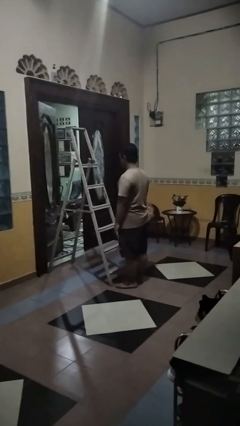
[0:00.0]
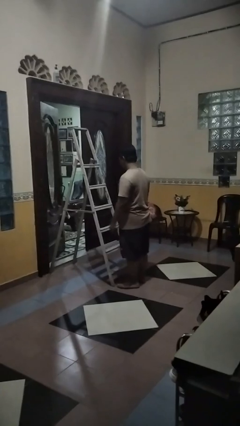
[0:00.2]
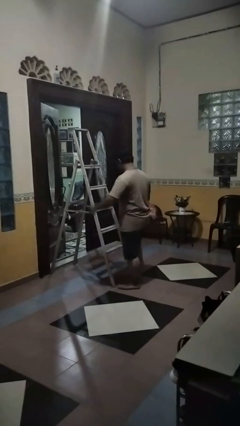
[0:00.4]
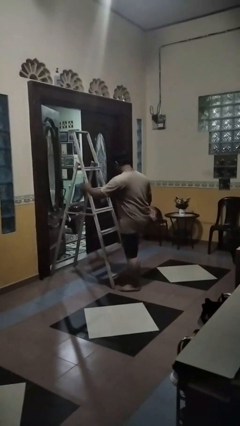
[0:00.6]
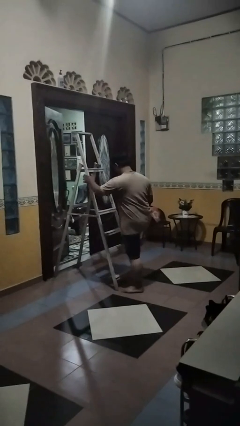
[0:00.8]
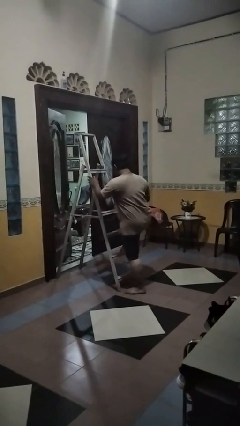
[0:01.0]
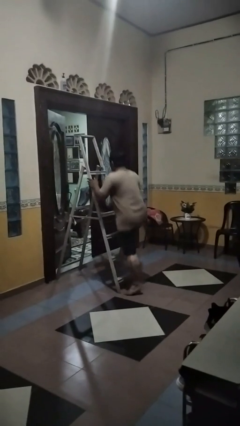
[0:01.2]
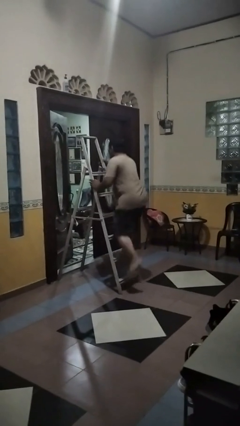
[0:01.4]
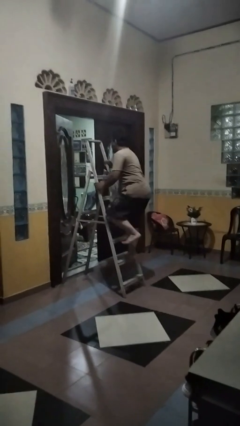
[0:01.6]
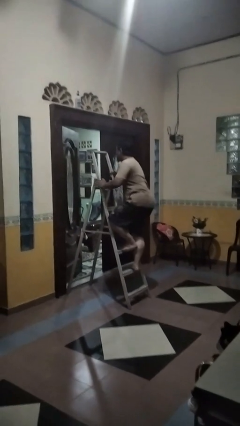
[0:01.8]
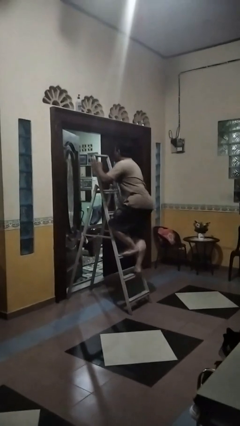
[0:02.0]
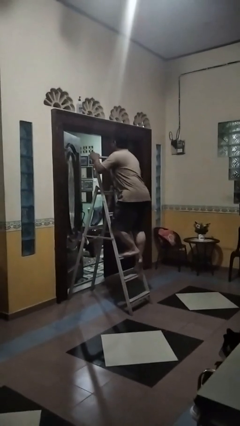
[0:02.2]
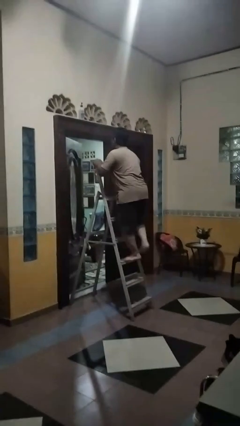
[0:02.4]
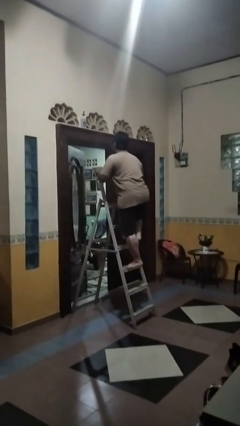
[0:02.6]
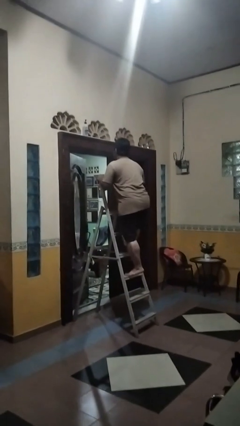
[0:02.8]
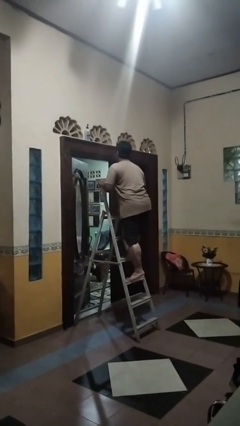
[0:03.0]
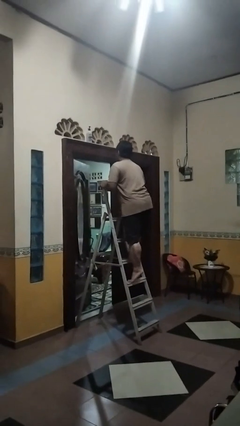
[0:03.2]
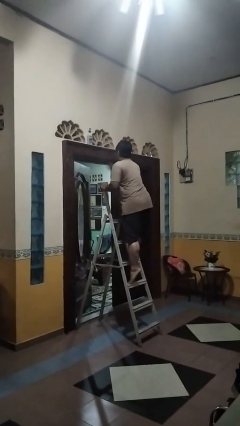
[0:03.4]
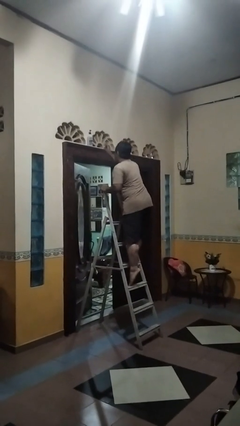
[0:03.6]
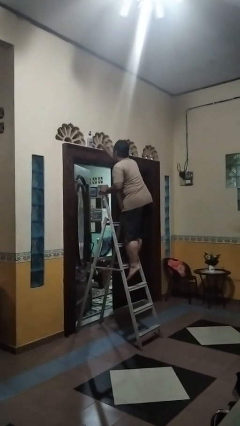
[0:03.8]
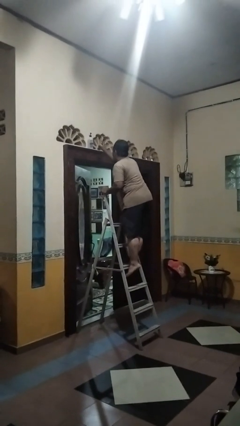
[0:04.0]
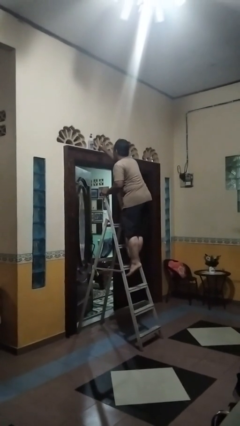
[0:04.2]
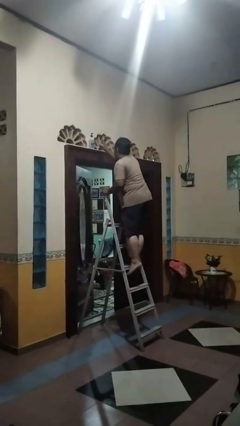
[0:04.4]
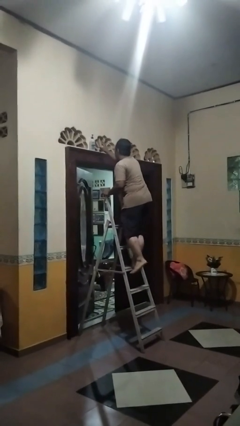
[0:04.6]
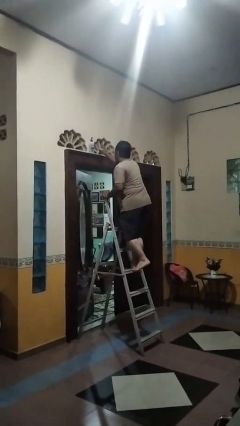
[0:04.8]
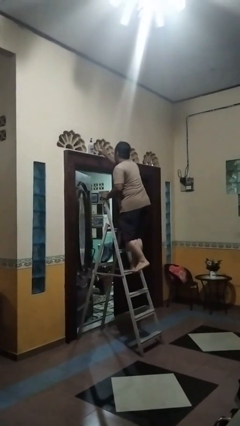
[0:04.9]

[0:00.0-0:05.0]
person climbs up ladder

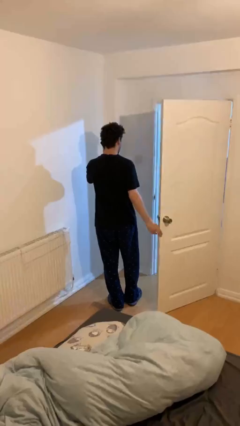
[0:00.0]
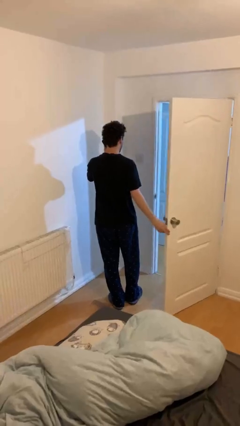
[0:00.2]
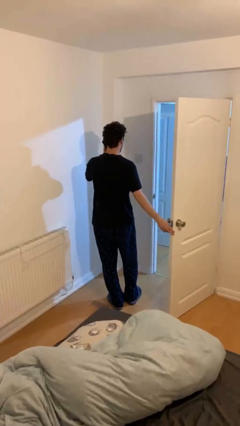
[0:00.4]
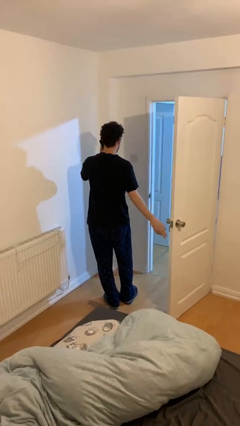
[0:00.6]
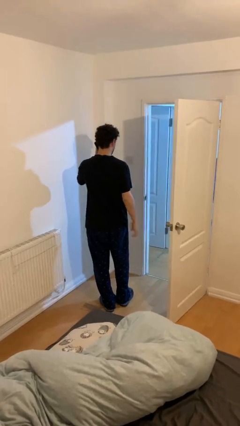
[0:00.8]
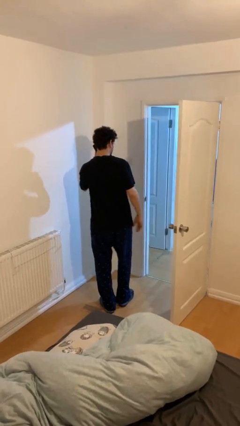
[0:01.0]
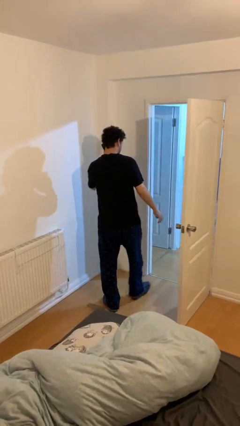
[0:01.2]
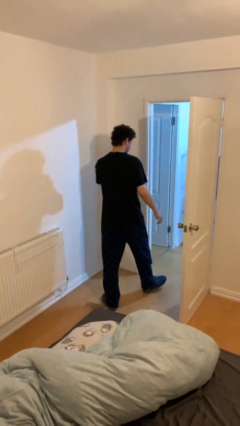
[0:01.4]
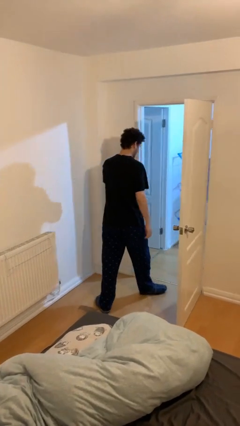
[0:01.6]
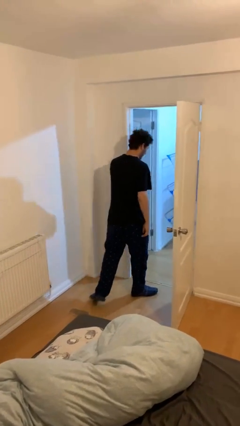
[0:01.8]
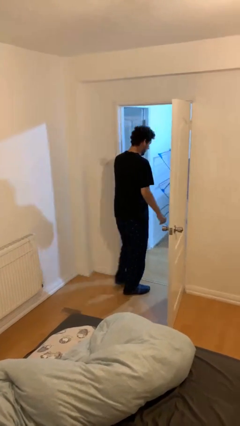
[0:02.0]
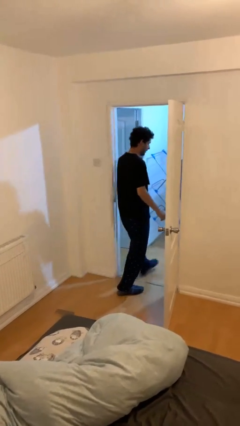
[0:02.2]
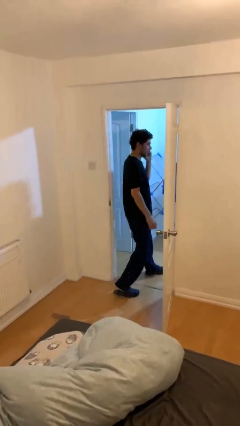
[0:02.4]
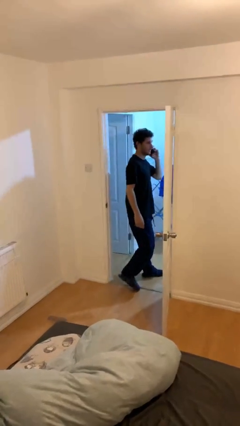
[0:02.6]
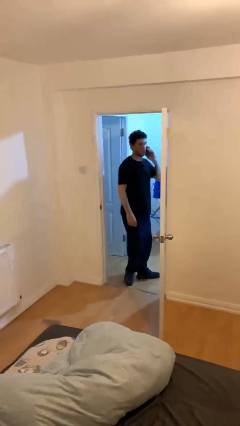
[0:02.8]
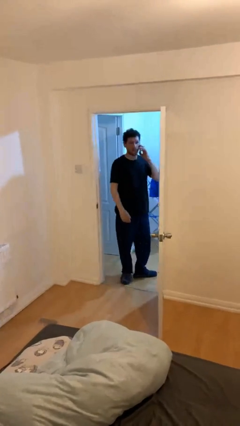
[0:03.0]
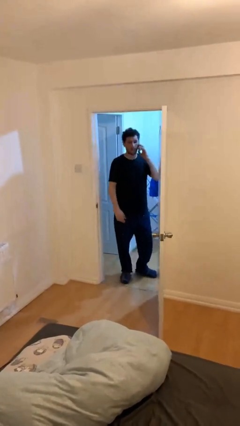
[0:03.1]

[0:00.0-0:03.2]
person exits scene through structure

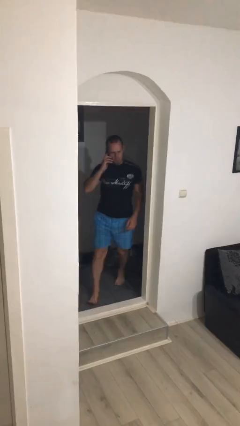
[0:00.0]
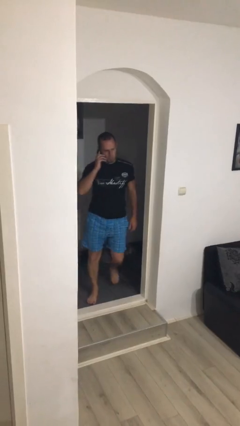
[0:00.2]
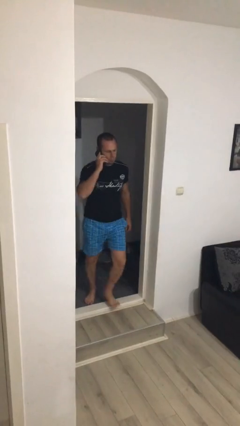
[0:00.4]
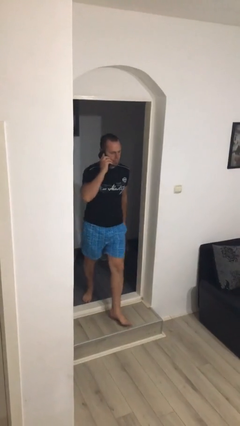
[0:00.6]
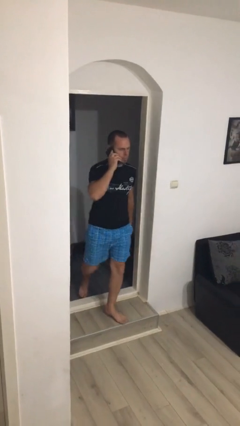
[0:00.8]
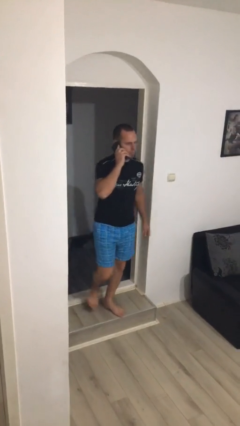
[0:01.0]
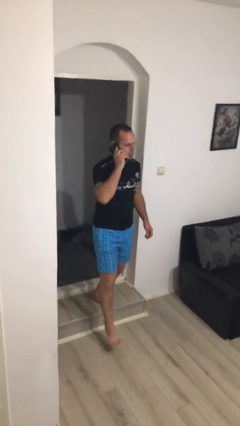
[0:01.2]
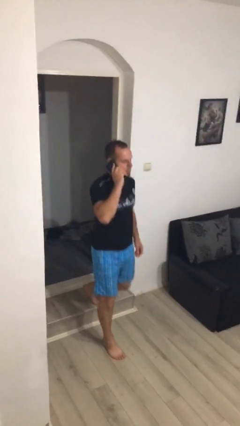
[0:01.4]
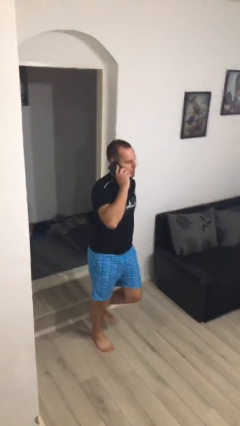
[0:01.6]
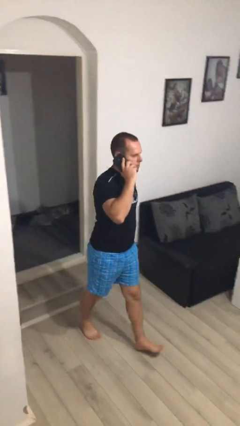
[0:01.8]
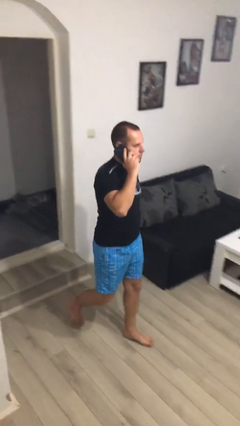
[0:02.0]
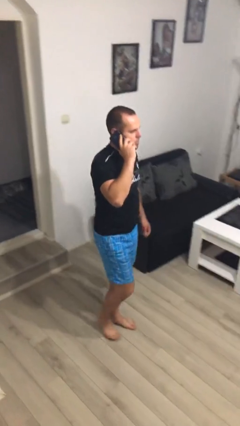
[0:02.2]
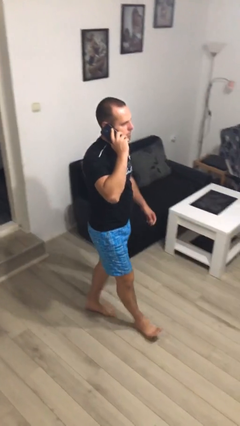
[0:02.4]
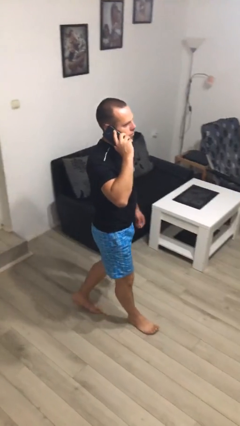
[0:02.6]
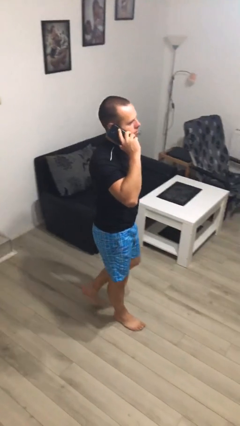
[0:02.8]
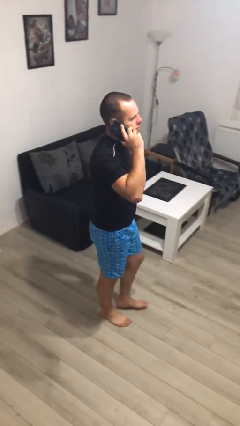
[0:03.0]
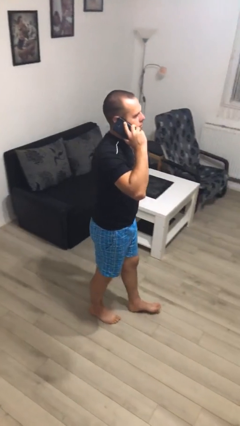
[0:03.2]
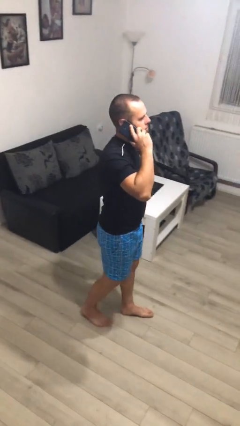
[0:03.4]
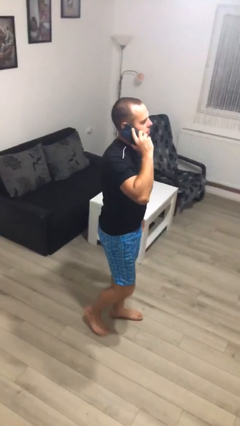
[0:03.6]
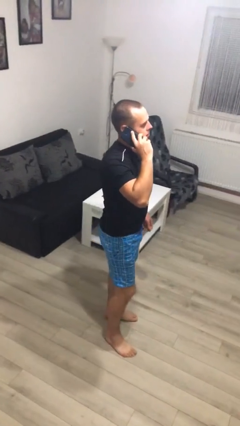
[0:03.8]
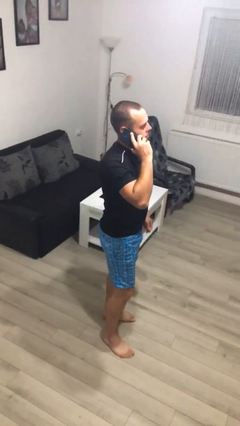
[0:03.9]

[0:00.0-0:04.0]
person enters scene through structure

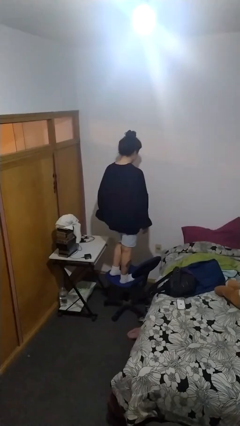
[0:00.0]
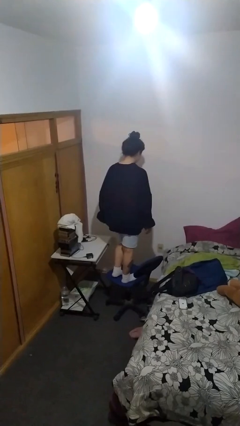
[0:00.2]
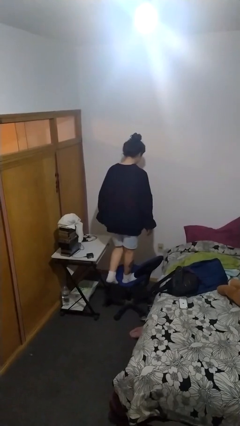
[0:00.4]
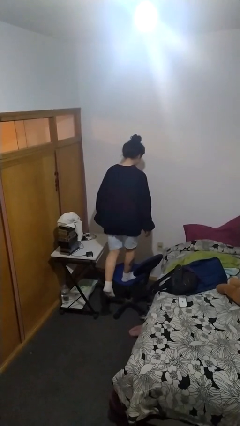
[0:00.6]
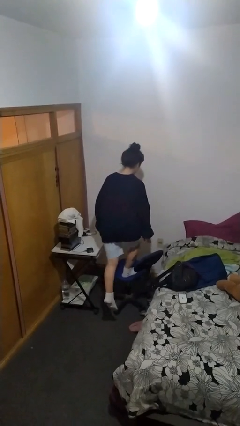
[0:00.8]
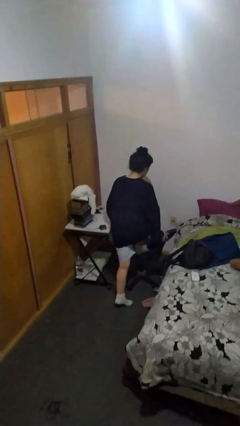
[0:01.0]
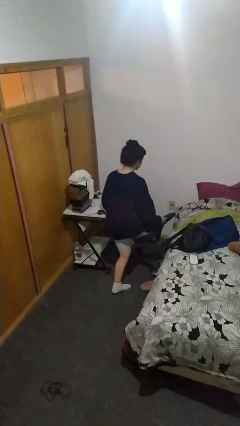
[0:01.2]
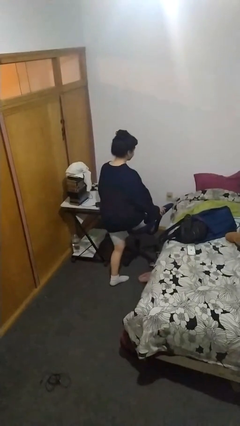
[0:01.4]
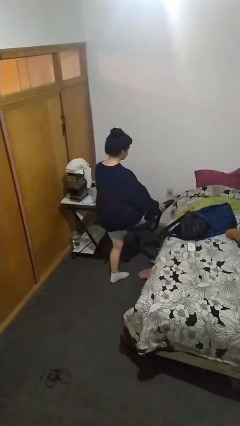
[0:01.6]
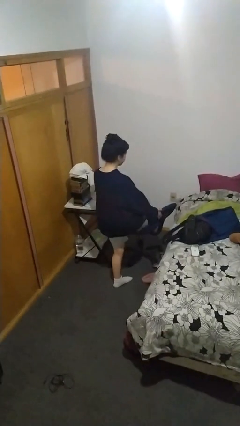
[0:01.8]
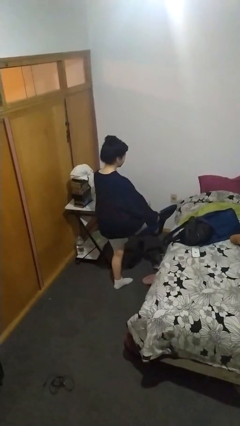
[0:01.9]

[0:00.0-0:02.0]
person climbs off chair

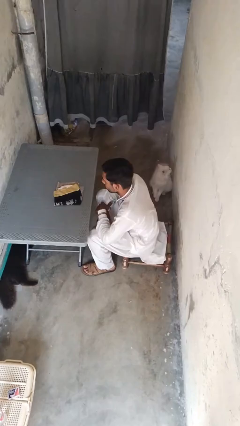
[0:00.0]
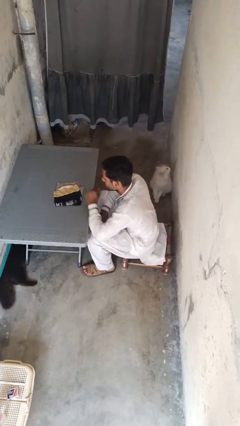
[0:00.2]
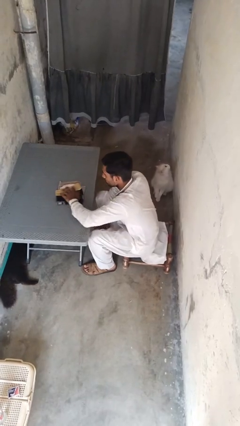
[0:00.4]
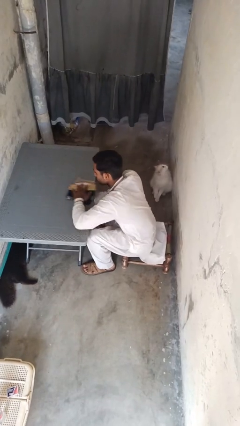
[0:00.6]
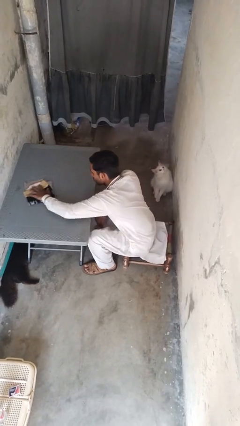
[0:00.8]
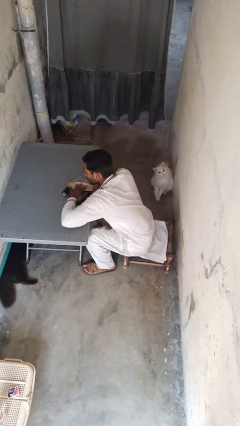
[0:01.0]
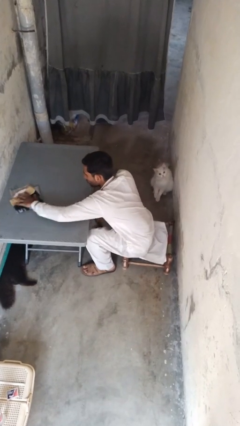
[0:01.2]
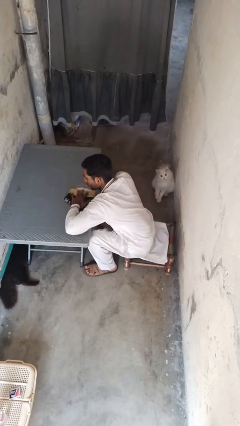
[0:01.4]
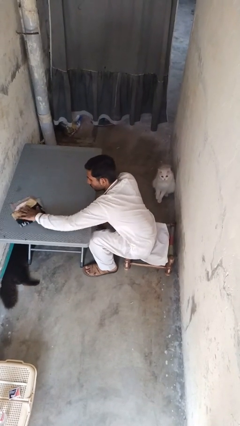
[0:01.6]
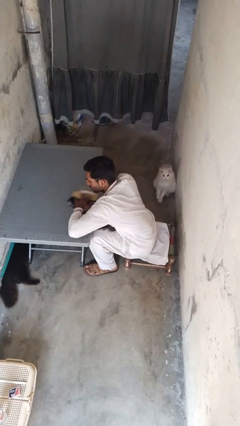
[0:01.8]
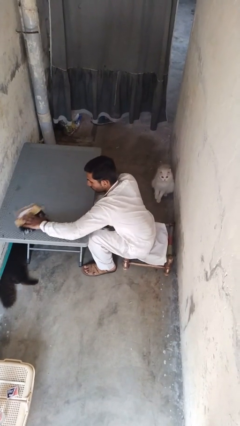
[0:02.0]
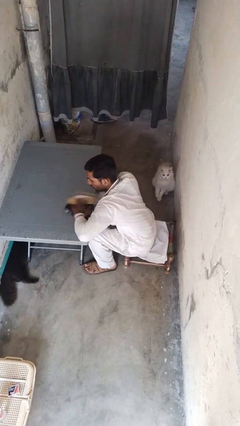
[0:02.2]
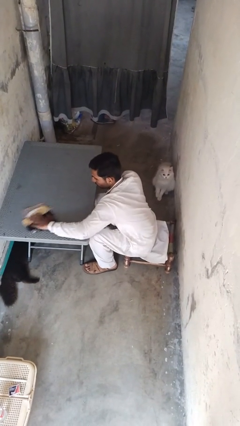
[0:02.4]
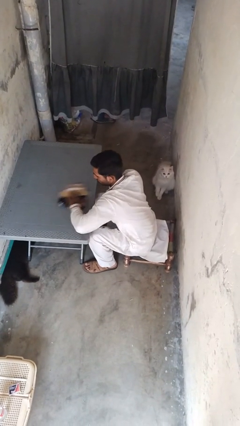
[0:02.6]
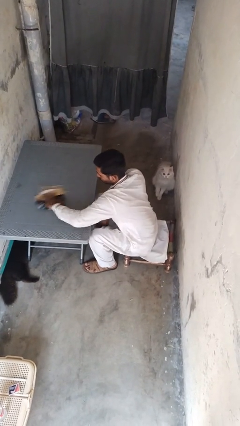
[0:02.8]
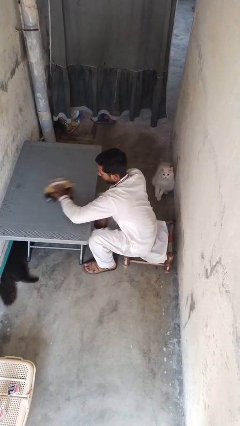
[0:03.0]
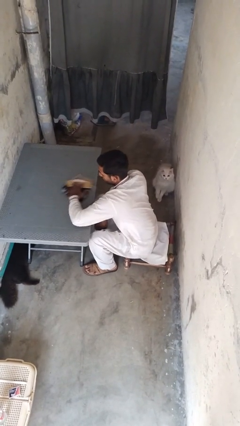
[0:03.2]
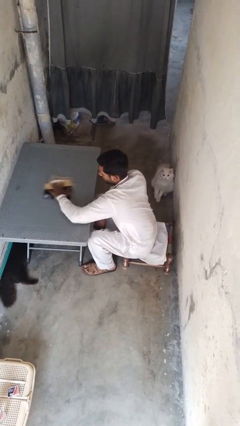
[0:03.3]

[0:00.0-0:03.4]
person cleans table with rag

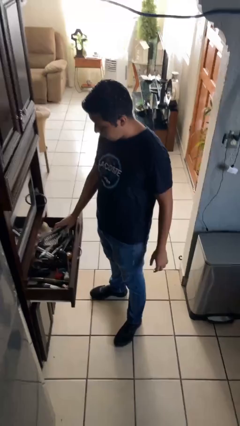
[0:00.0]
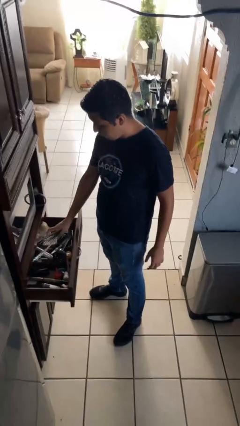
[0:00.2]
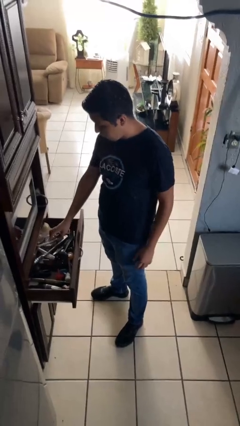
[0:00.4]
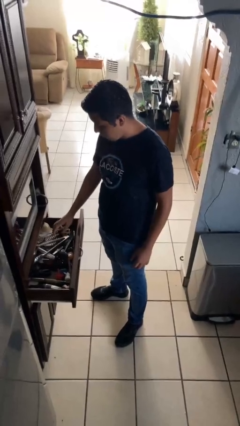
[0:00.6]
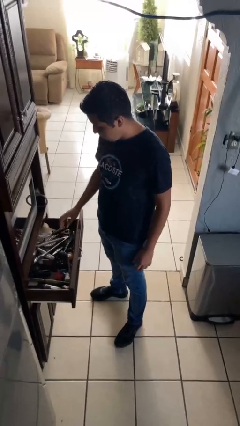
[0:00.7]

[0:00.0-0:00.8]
person puts object into kitchen drawer
